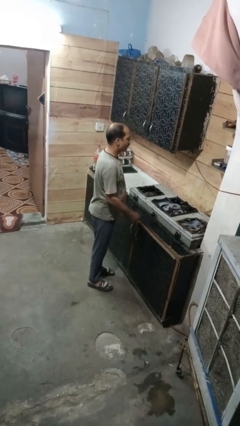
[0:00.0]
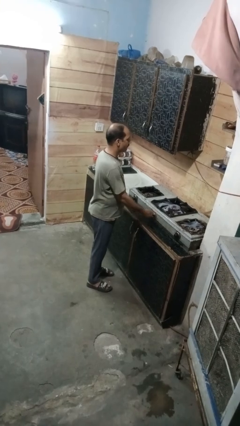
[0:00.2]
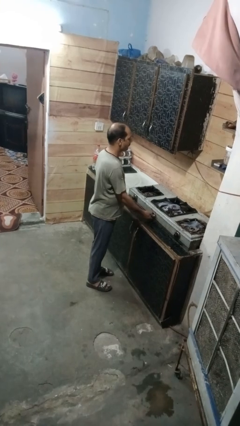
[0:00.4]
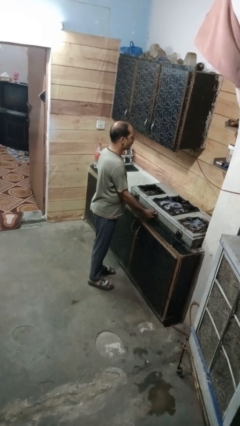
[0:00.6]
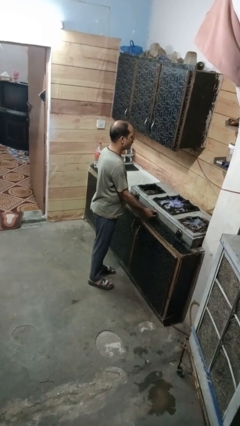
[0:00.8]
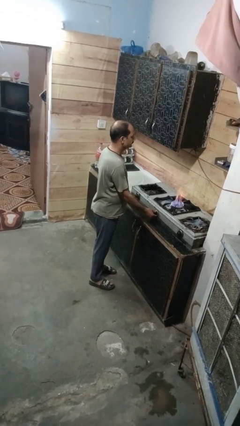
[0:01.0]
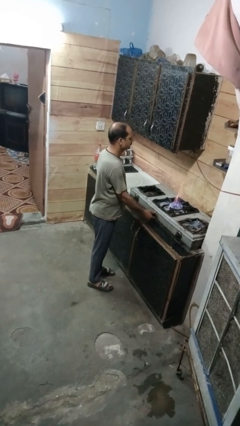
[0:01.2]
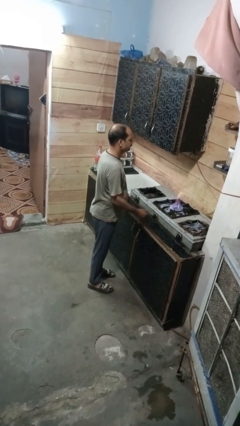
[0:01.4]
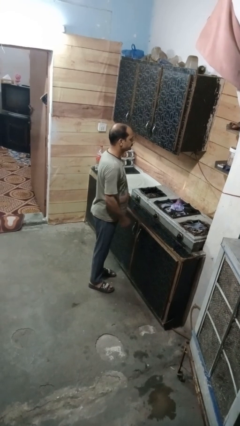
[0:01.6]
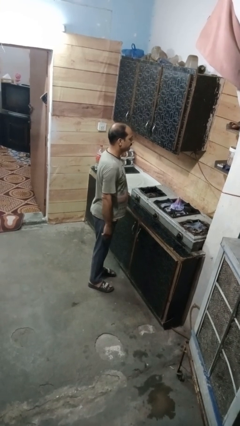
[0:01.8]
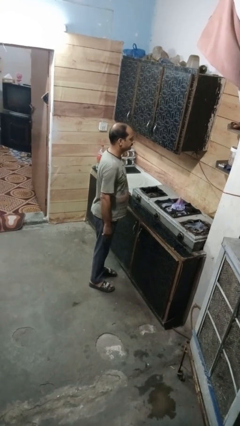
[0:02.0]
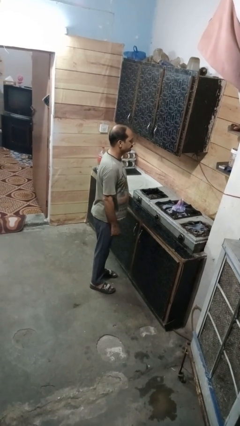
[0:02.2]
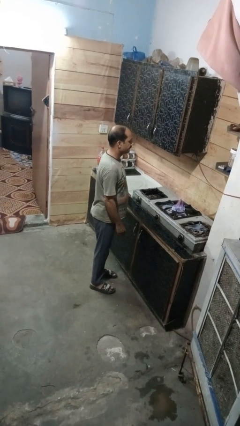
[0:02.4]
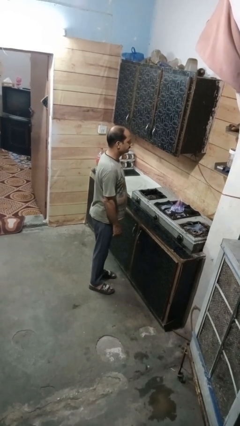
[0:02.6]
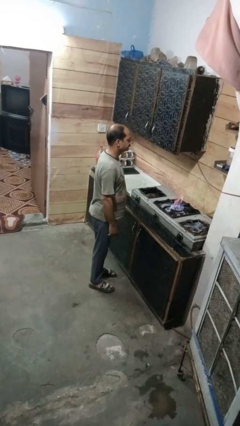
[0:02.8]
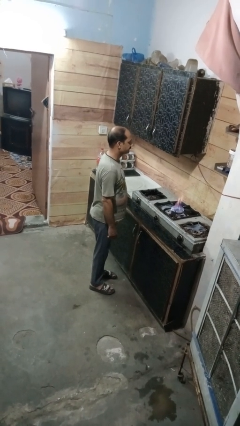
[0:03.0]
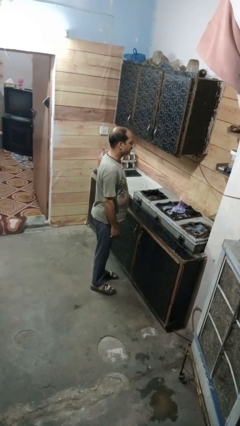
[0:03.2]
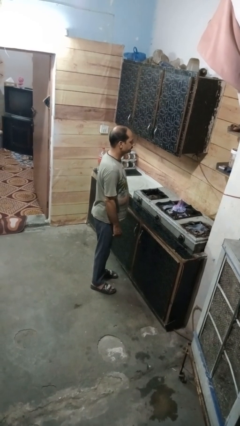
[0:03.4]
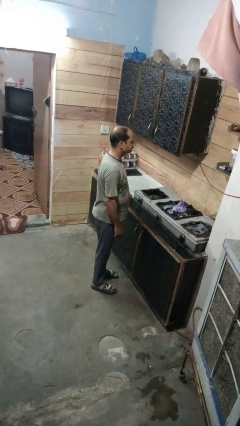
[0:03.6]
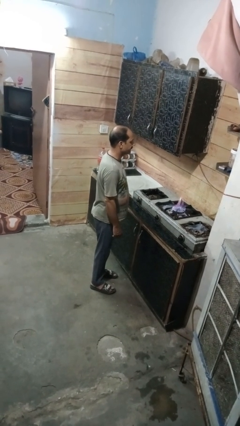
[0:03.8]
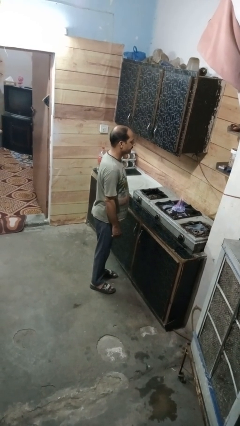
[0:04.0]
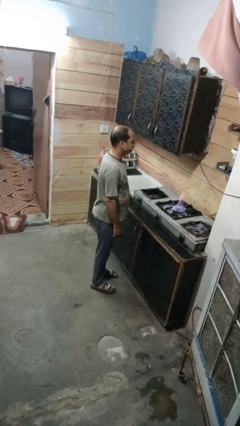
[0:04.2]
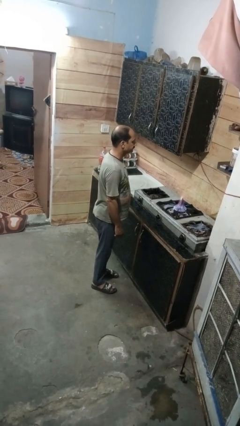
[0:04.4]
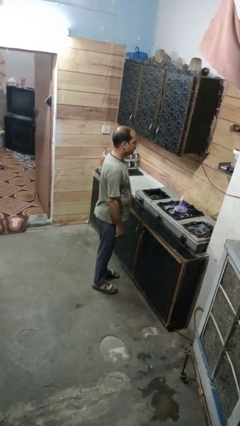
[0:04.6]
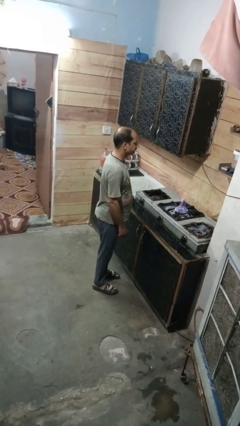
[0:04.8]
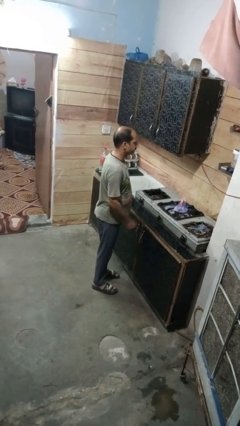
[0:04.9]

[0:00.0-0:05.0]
person turns on stovetop

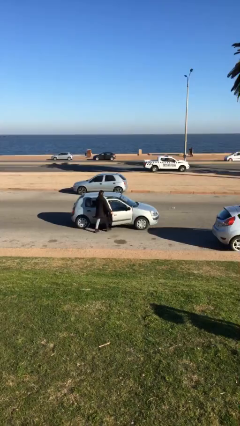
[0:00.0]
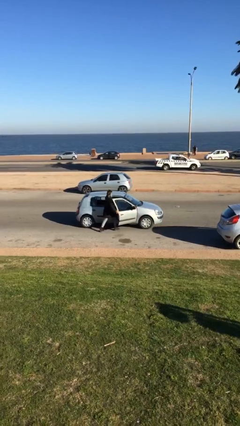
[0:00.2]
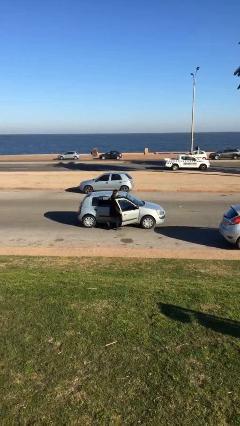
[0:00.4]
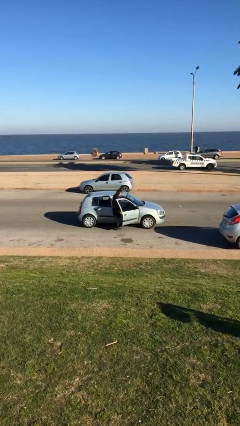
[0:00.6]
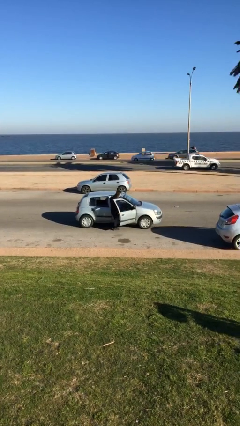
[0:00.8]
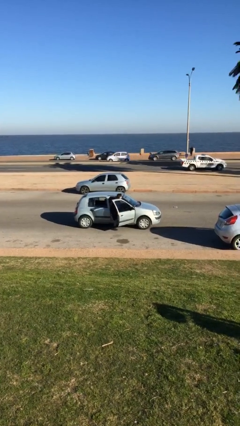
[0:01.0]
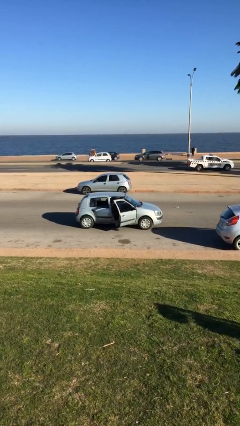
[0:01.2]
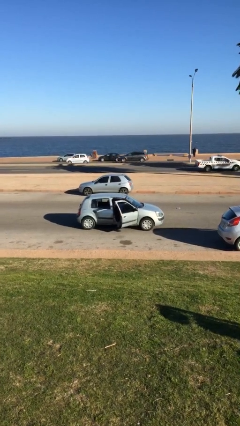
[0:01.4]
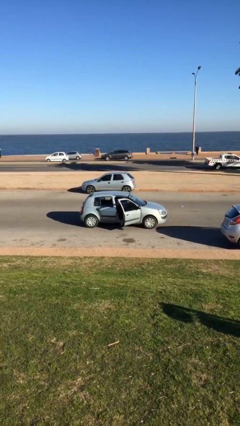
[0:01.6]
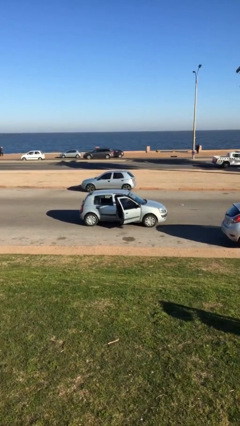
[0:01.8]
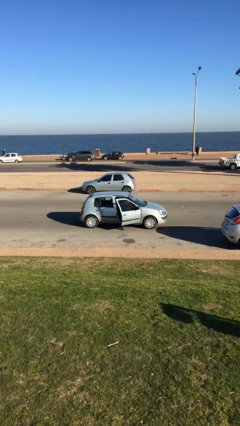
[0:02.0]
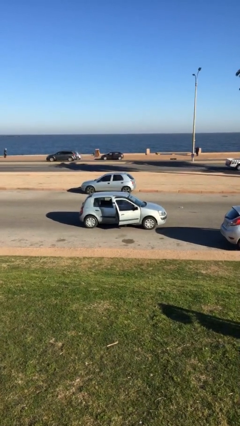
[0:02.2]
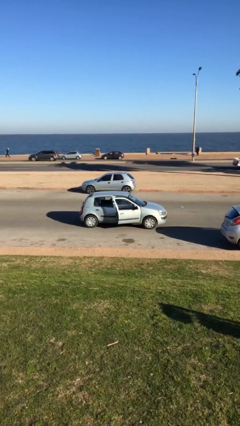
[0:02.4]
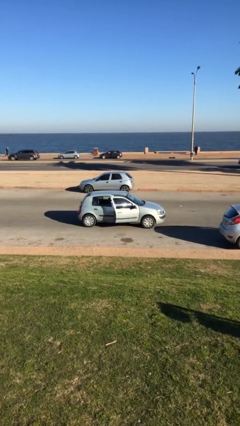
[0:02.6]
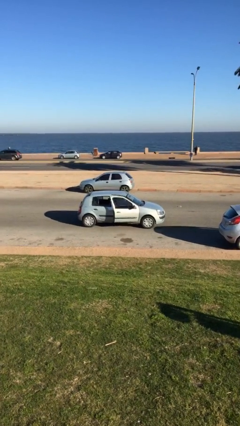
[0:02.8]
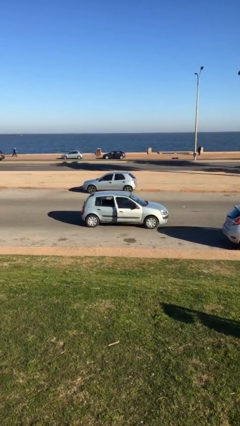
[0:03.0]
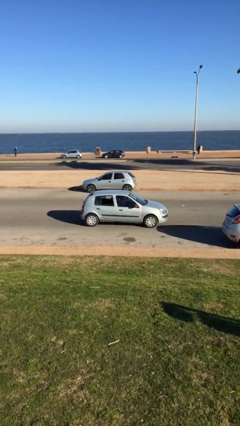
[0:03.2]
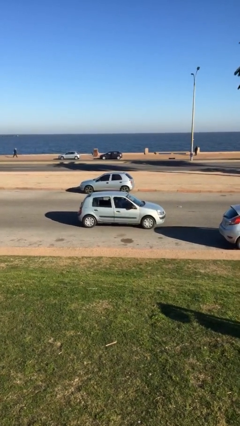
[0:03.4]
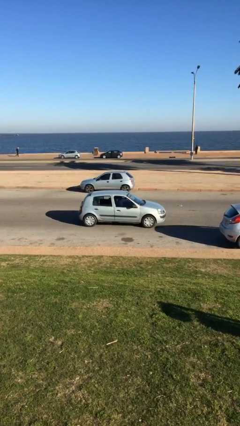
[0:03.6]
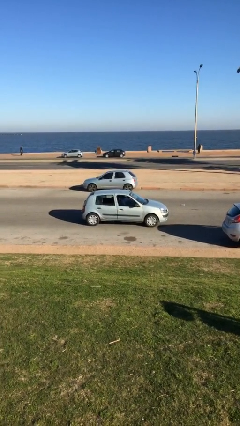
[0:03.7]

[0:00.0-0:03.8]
car picks up person

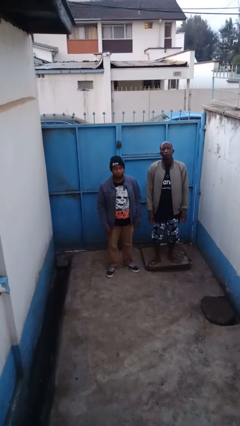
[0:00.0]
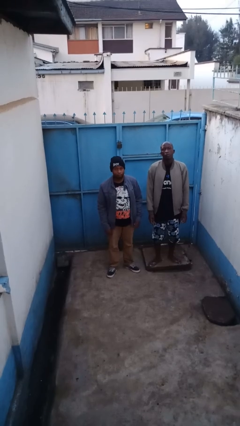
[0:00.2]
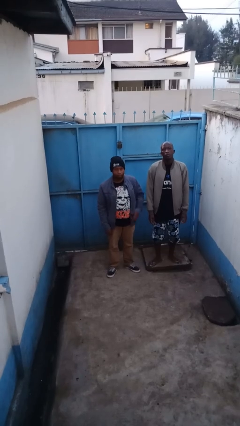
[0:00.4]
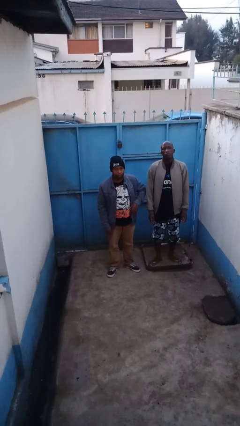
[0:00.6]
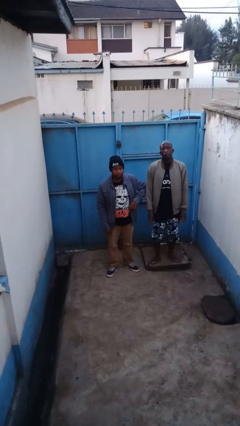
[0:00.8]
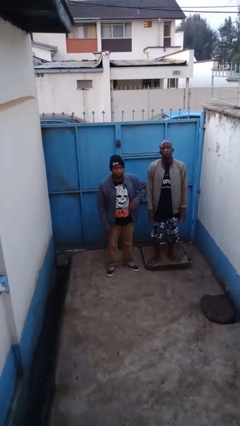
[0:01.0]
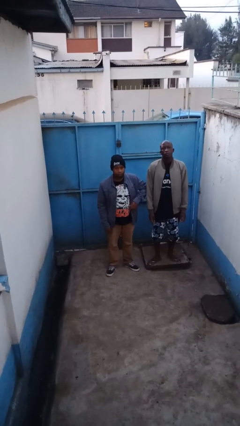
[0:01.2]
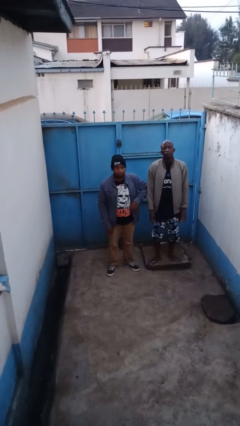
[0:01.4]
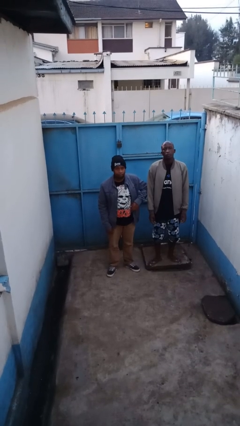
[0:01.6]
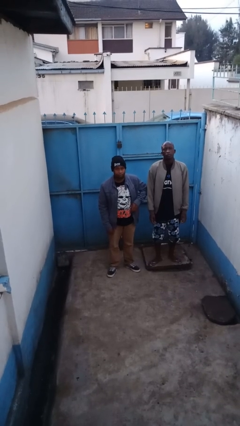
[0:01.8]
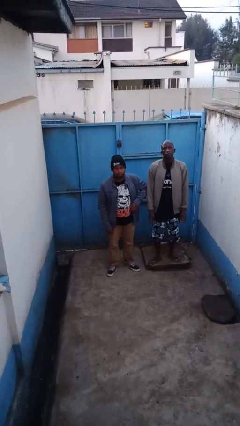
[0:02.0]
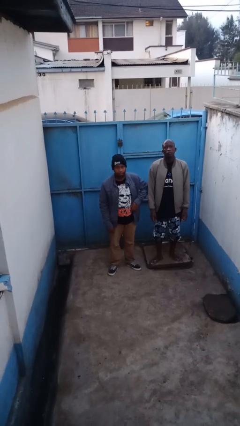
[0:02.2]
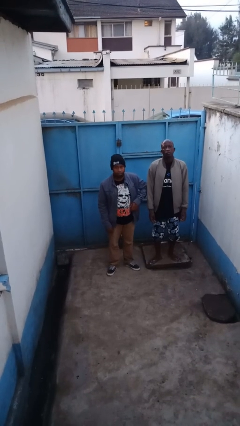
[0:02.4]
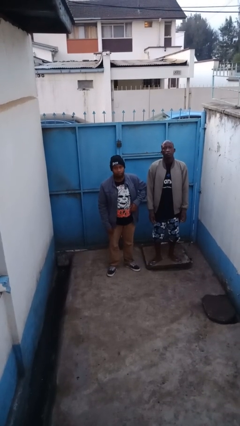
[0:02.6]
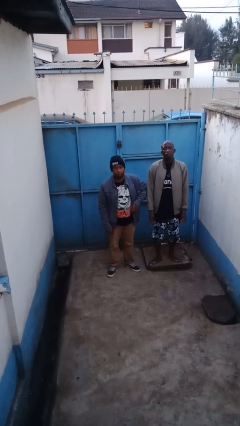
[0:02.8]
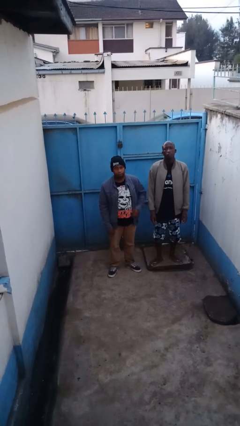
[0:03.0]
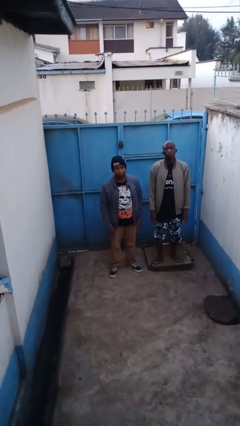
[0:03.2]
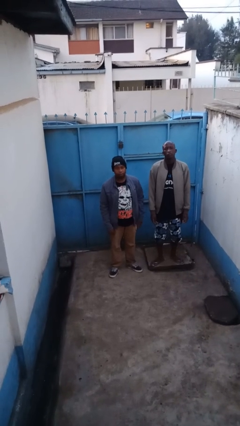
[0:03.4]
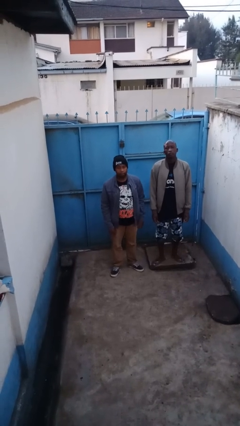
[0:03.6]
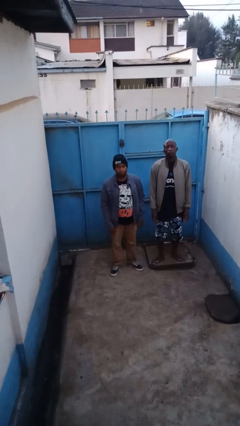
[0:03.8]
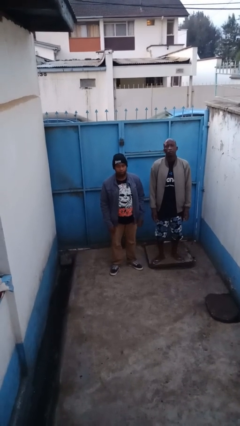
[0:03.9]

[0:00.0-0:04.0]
person nudges person with elbow

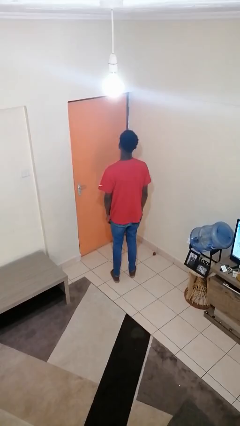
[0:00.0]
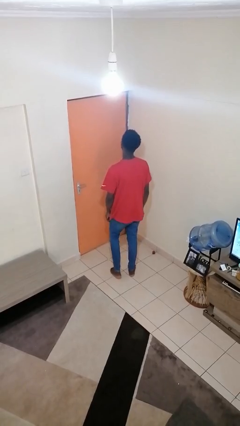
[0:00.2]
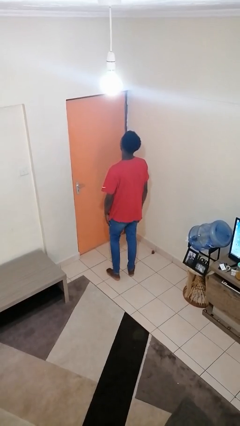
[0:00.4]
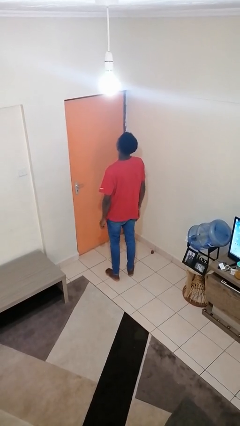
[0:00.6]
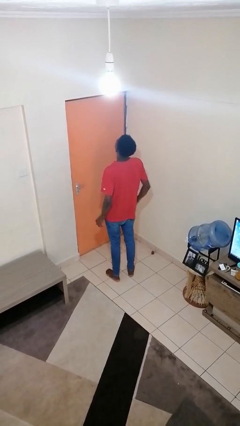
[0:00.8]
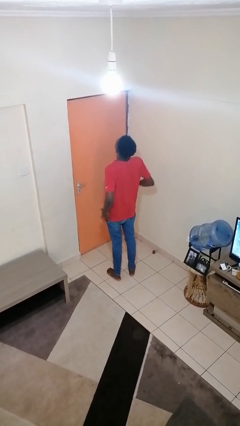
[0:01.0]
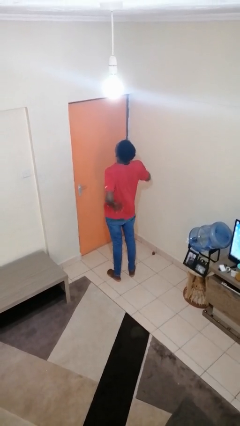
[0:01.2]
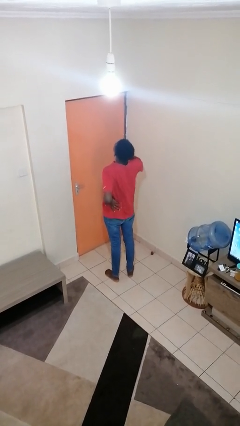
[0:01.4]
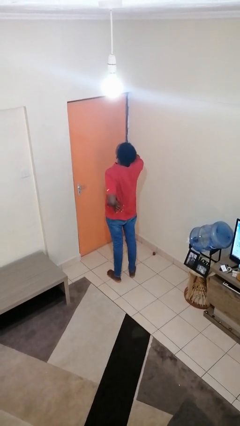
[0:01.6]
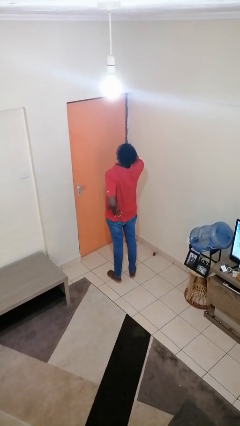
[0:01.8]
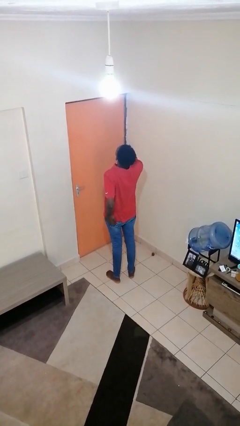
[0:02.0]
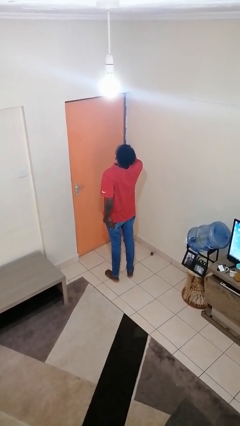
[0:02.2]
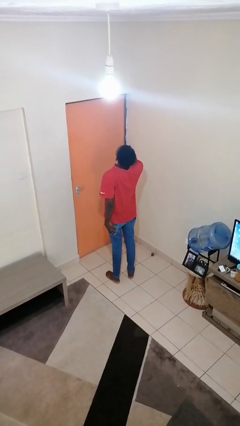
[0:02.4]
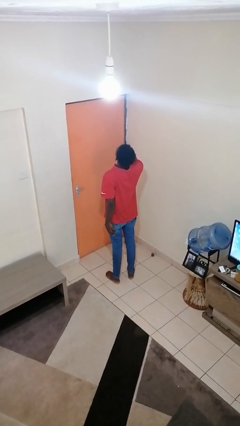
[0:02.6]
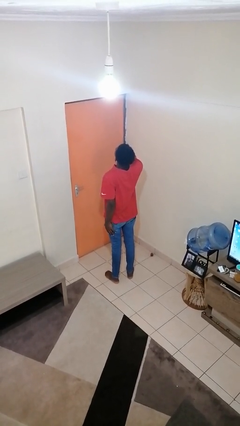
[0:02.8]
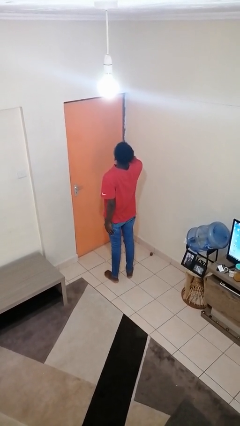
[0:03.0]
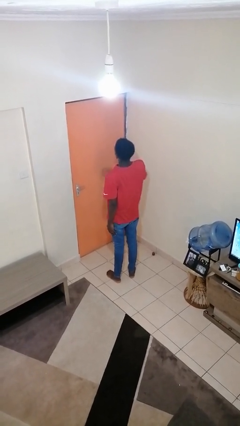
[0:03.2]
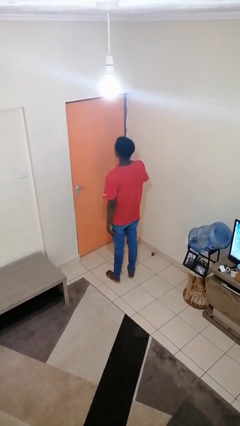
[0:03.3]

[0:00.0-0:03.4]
person yawns

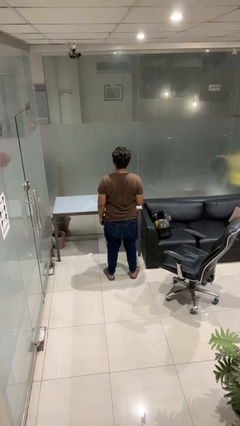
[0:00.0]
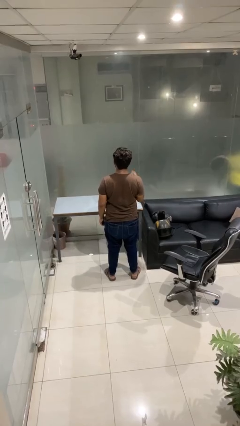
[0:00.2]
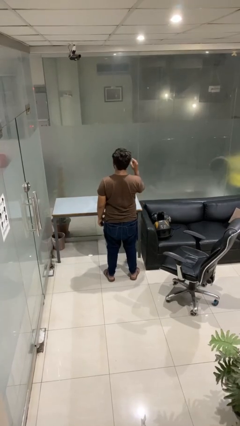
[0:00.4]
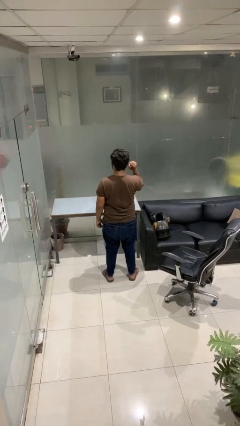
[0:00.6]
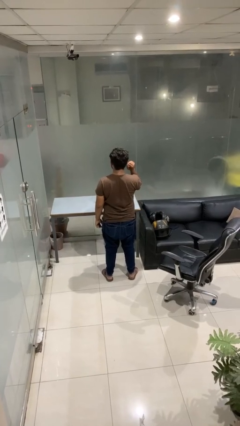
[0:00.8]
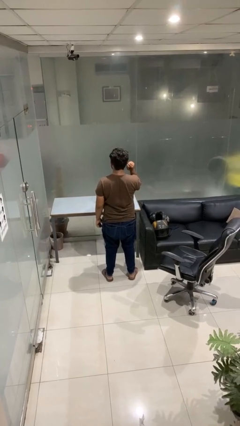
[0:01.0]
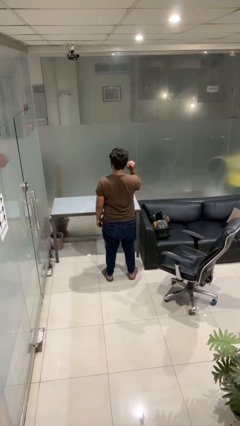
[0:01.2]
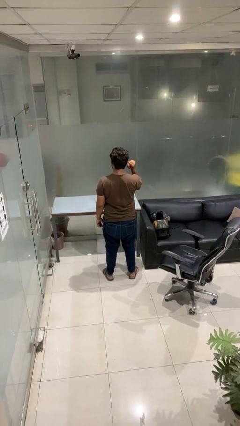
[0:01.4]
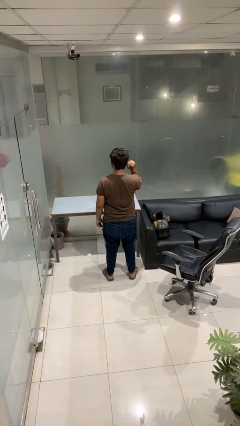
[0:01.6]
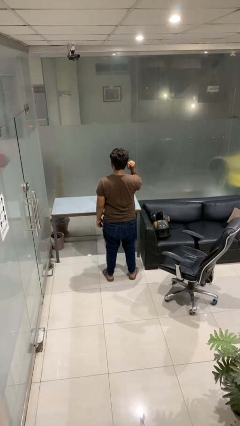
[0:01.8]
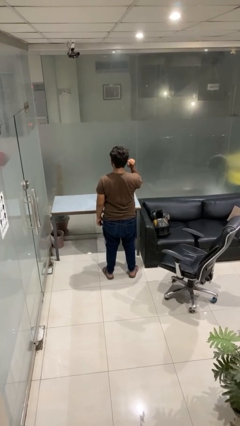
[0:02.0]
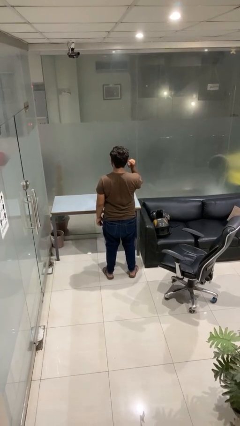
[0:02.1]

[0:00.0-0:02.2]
person gestures listen closely
